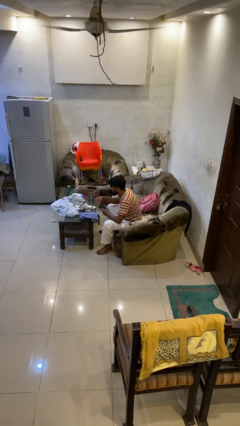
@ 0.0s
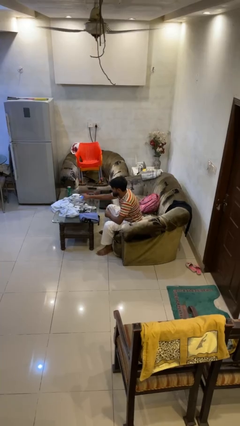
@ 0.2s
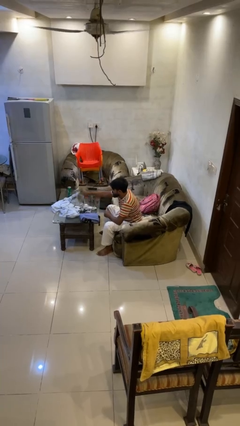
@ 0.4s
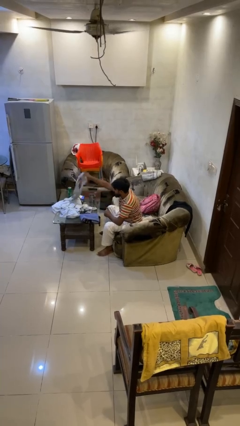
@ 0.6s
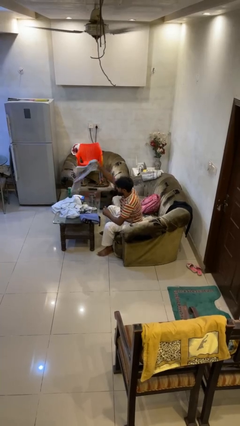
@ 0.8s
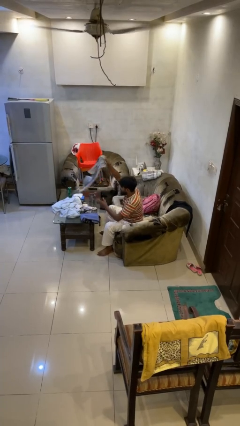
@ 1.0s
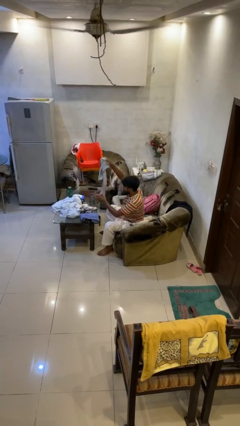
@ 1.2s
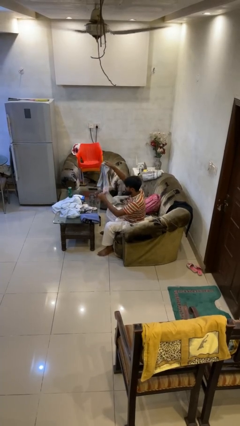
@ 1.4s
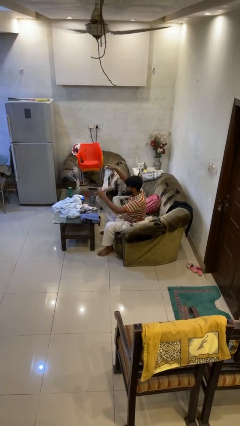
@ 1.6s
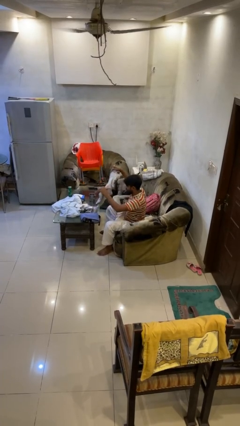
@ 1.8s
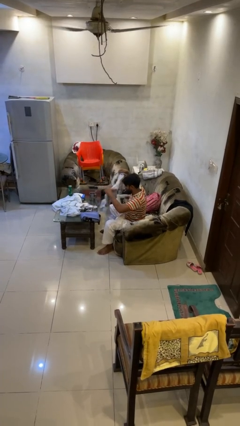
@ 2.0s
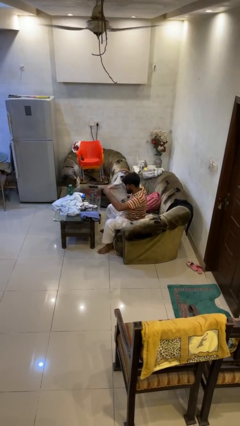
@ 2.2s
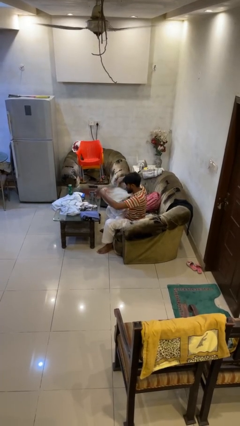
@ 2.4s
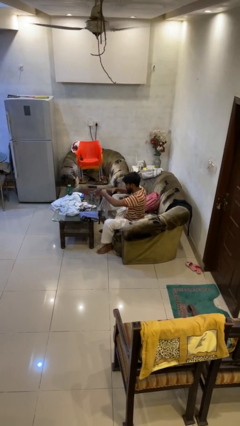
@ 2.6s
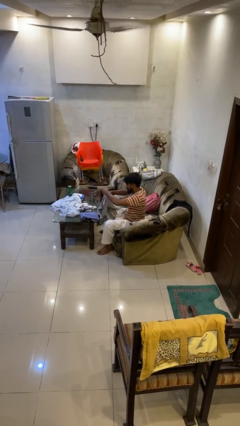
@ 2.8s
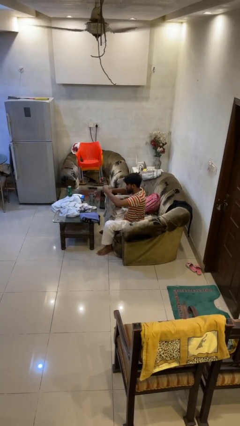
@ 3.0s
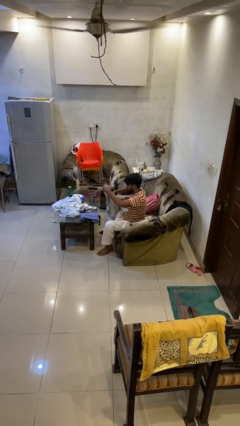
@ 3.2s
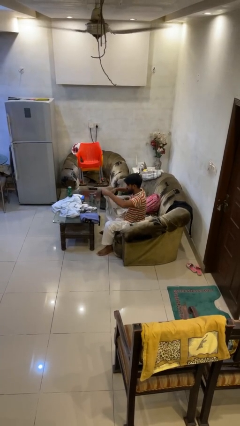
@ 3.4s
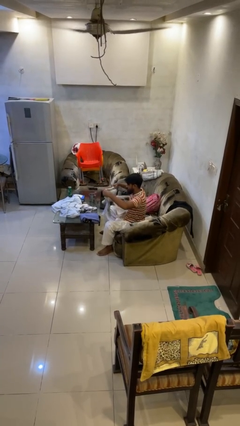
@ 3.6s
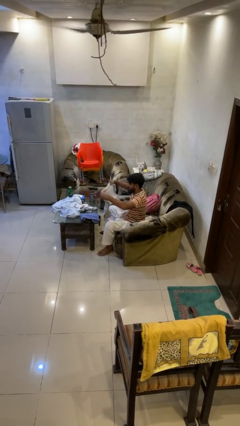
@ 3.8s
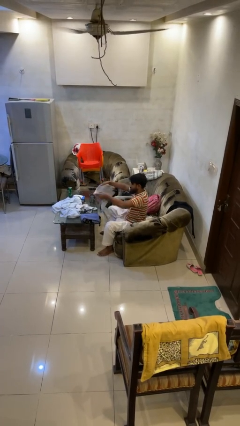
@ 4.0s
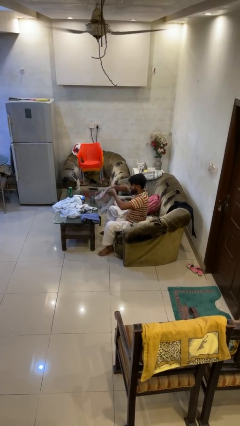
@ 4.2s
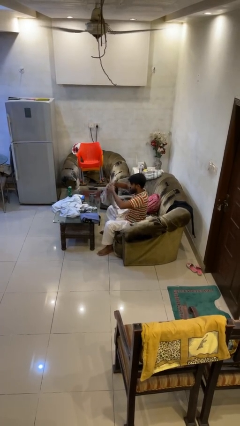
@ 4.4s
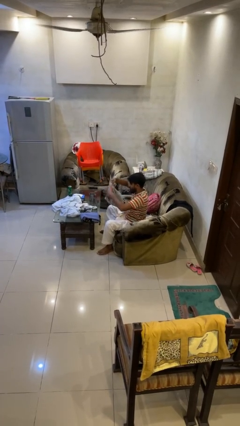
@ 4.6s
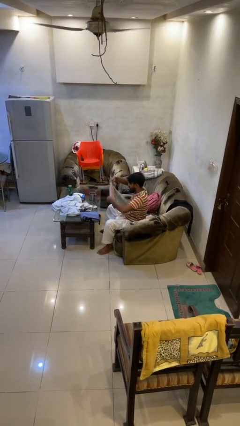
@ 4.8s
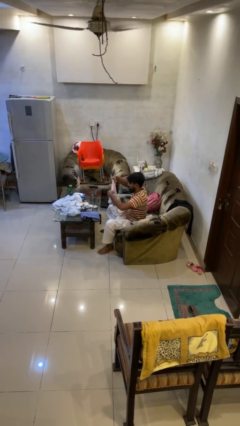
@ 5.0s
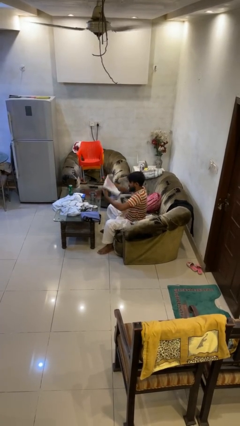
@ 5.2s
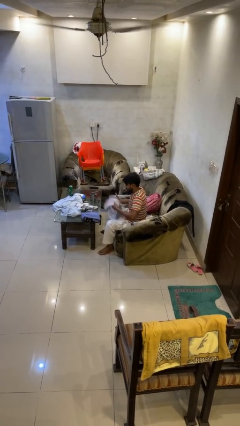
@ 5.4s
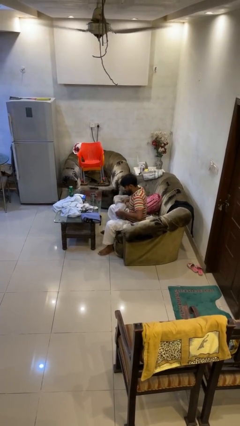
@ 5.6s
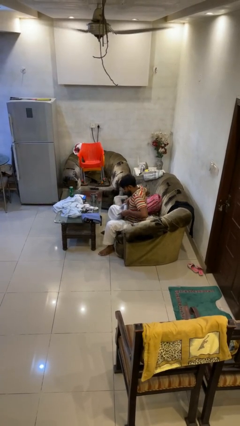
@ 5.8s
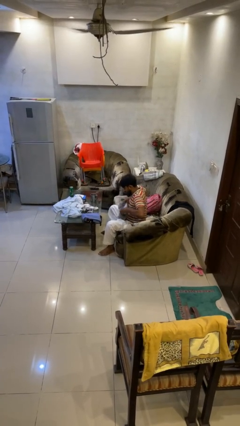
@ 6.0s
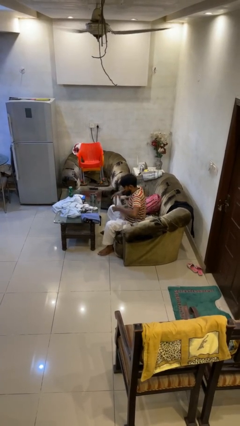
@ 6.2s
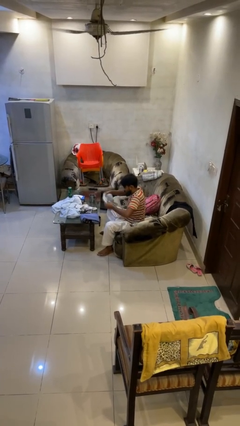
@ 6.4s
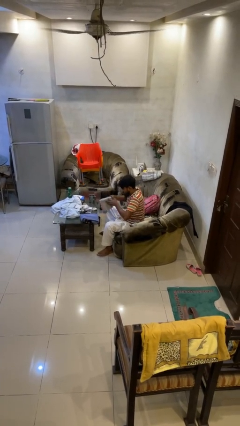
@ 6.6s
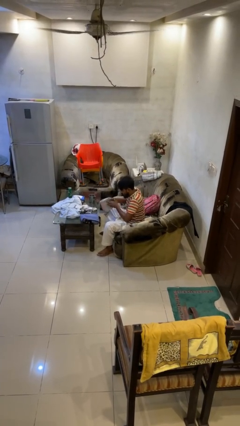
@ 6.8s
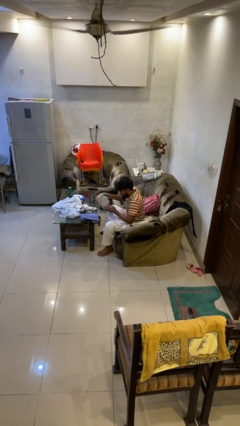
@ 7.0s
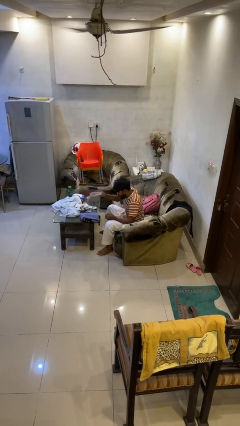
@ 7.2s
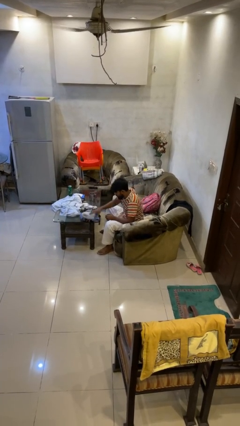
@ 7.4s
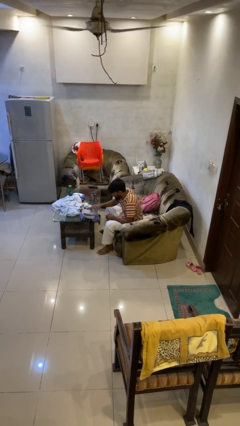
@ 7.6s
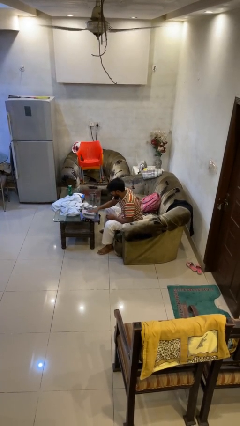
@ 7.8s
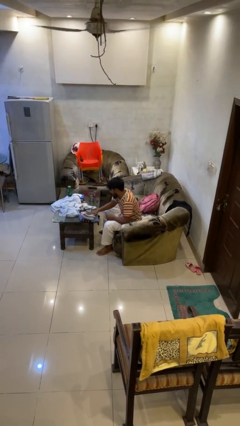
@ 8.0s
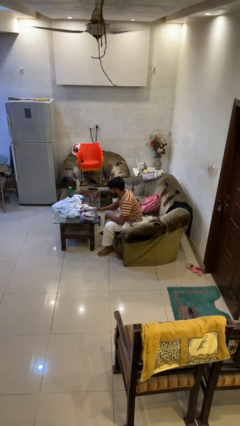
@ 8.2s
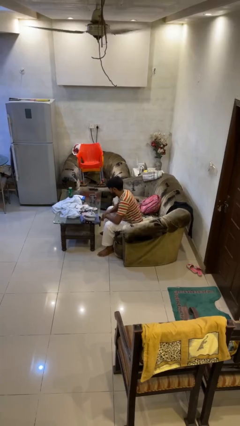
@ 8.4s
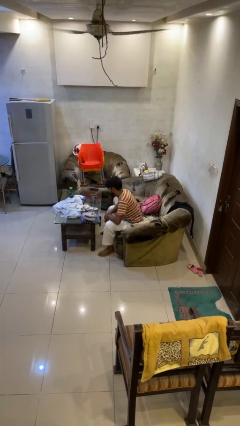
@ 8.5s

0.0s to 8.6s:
person folds shirt

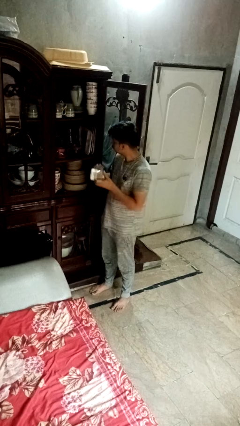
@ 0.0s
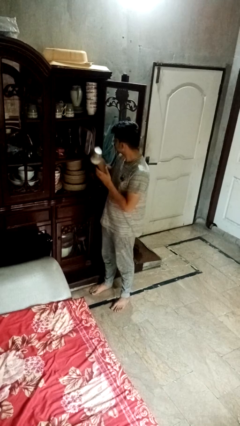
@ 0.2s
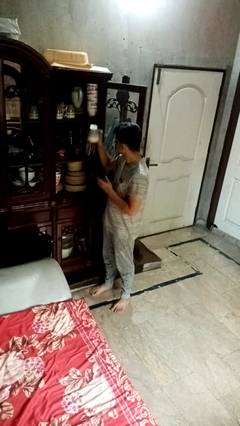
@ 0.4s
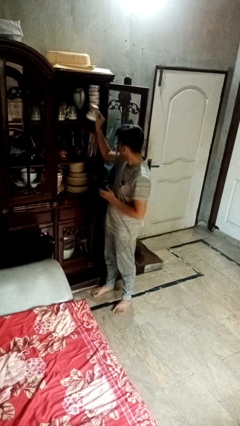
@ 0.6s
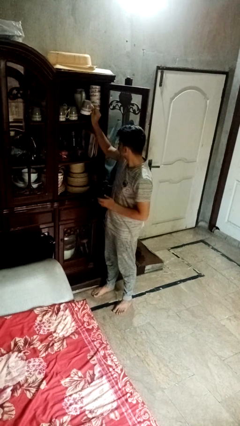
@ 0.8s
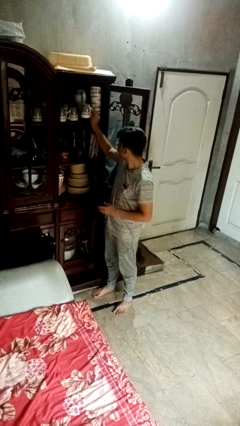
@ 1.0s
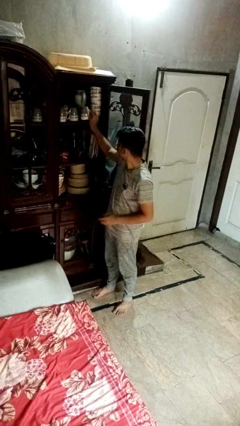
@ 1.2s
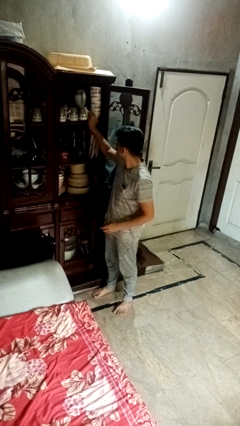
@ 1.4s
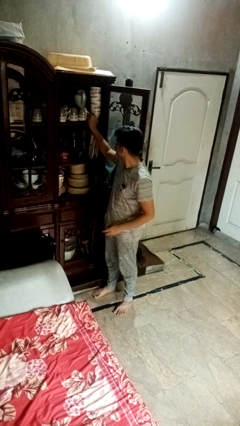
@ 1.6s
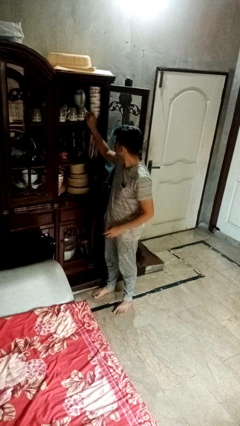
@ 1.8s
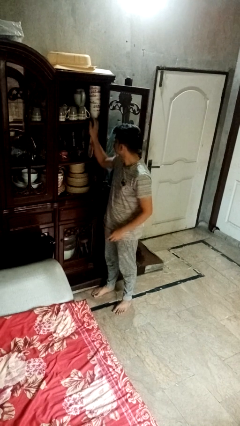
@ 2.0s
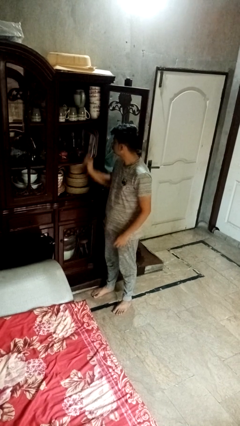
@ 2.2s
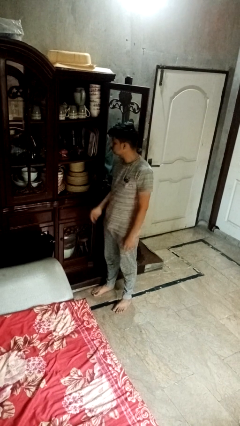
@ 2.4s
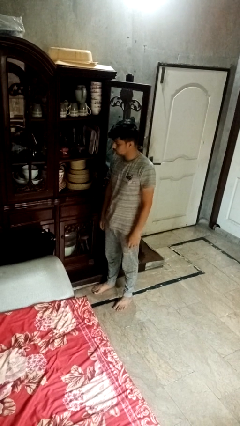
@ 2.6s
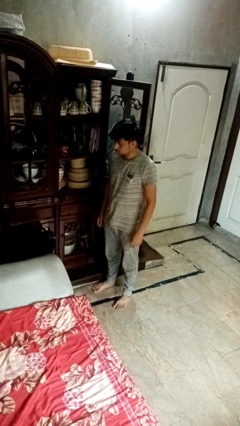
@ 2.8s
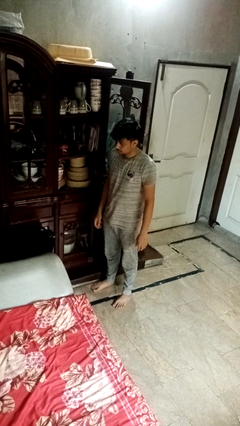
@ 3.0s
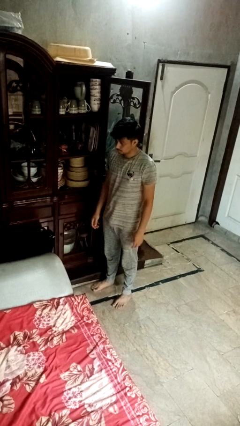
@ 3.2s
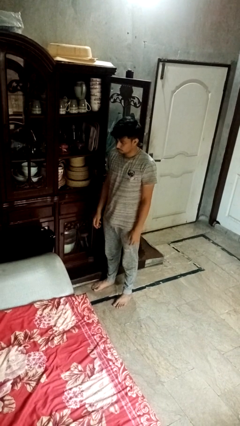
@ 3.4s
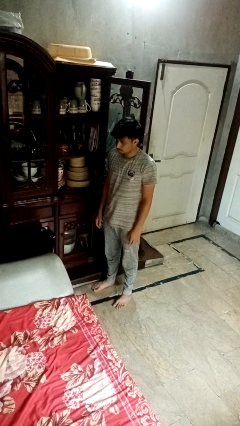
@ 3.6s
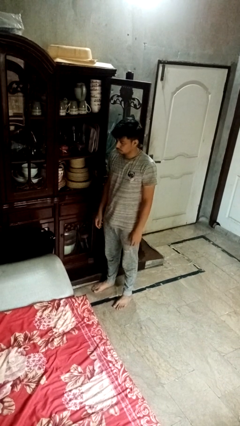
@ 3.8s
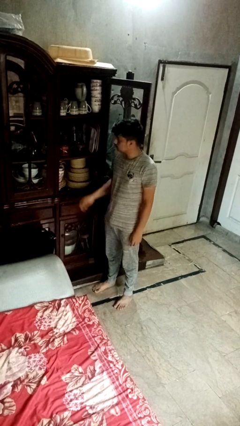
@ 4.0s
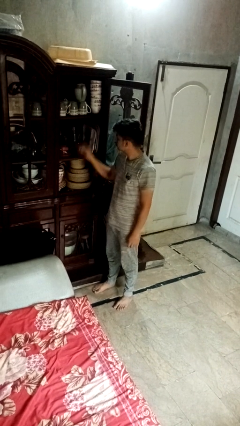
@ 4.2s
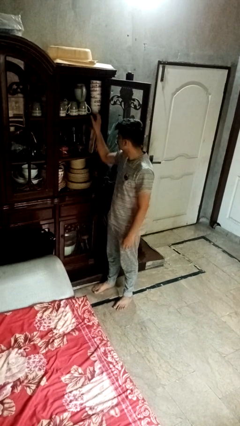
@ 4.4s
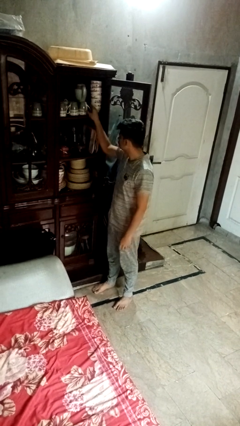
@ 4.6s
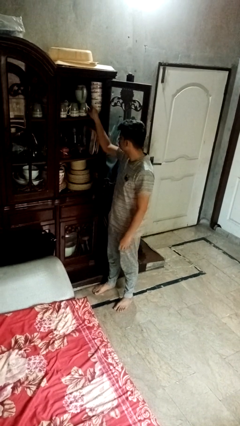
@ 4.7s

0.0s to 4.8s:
person puts object in cabinet

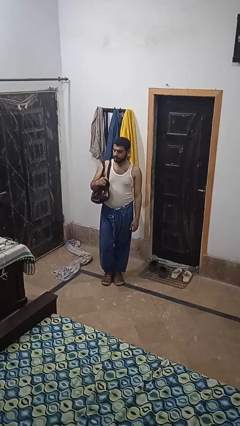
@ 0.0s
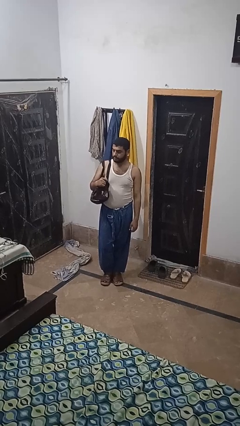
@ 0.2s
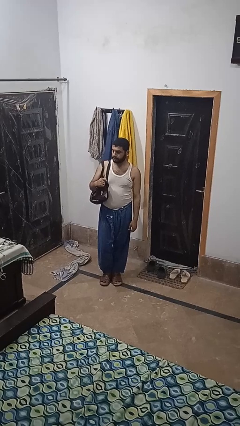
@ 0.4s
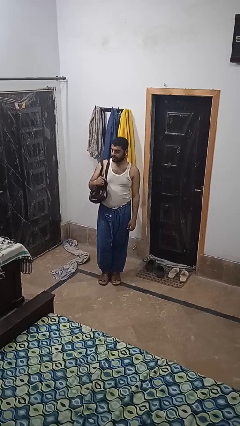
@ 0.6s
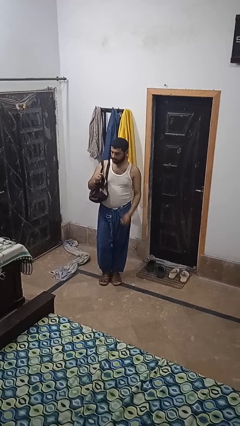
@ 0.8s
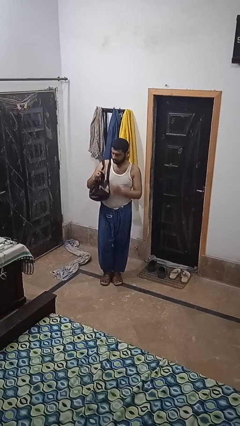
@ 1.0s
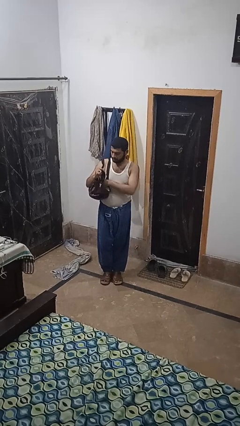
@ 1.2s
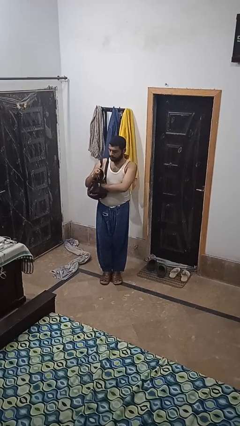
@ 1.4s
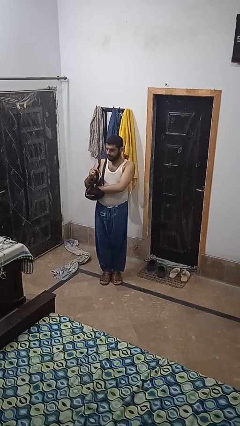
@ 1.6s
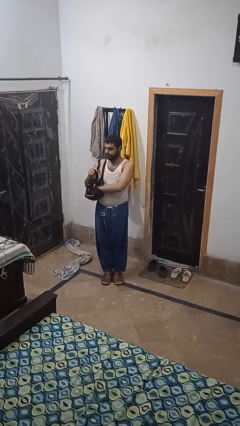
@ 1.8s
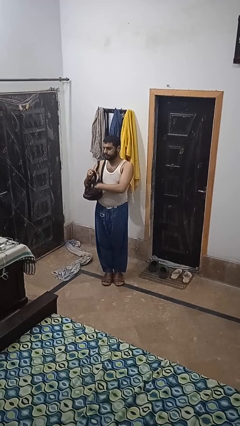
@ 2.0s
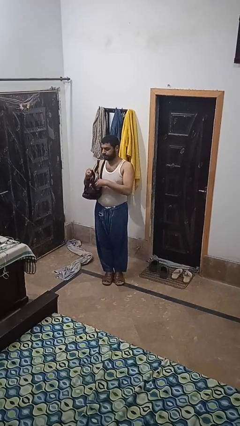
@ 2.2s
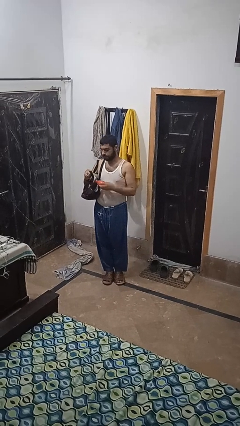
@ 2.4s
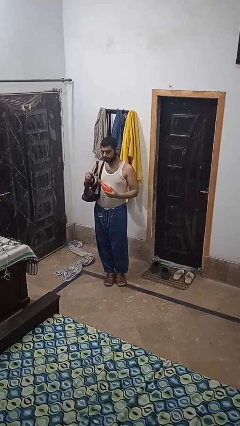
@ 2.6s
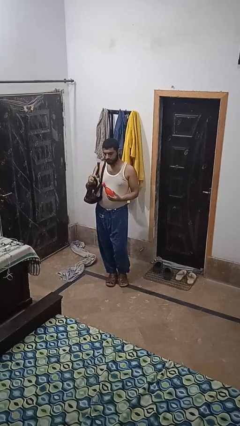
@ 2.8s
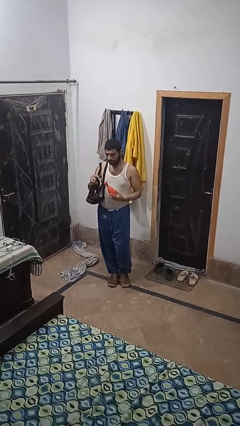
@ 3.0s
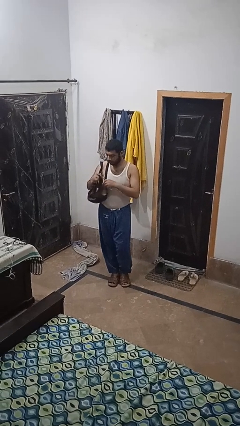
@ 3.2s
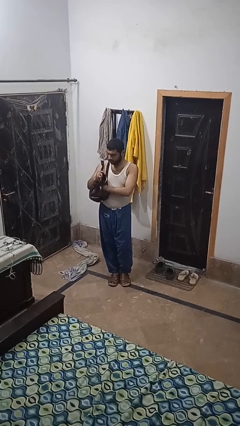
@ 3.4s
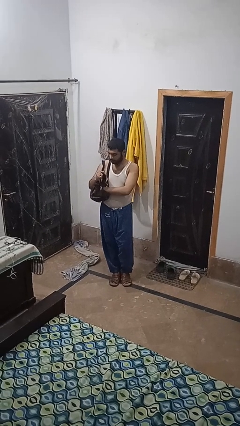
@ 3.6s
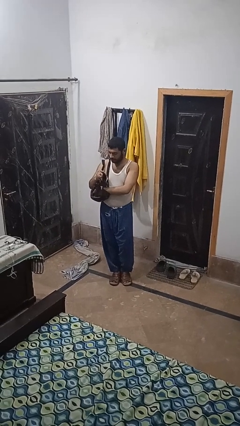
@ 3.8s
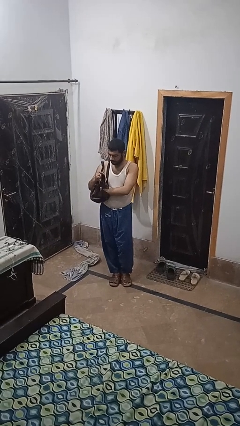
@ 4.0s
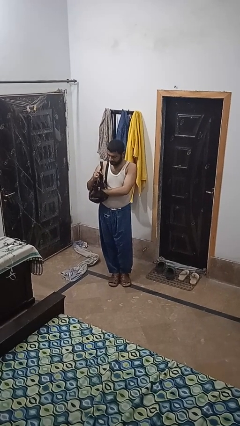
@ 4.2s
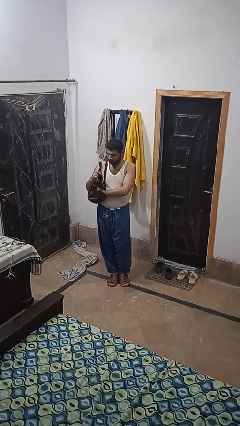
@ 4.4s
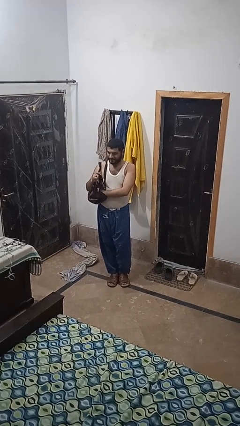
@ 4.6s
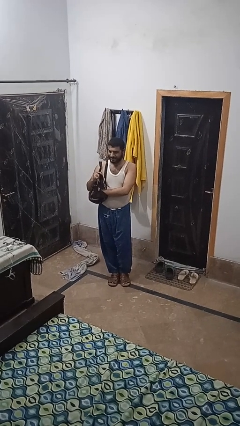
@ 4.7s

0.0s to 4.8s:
person searches in purse
